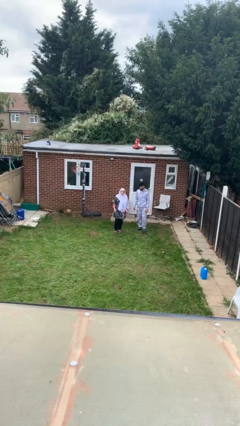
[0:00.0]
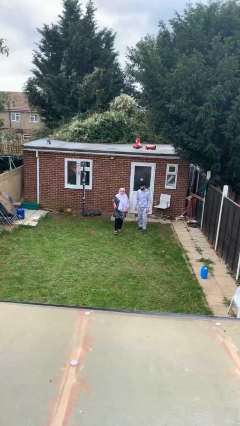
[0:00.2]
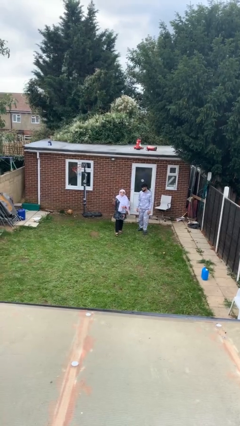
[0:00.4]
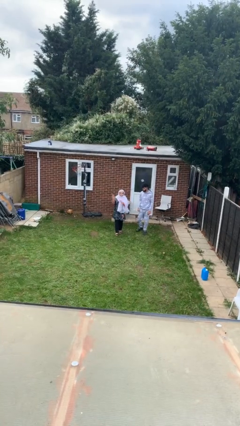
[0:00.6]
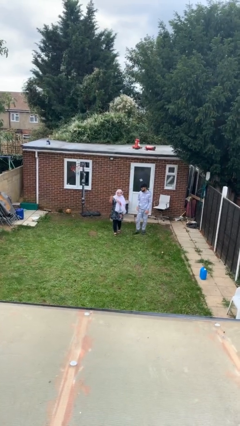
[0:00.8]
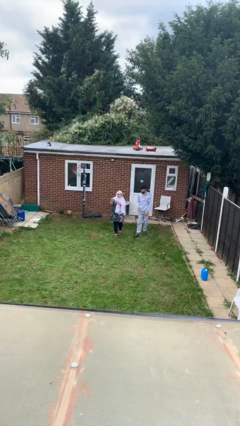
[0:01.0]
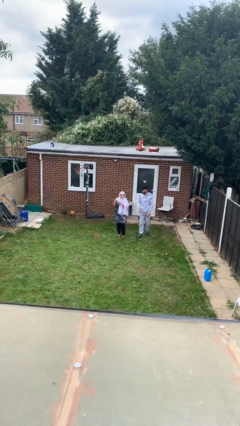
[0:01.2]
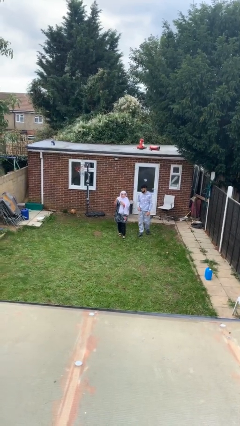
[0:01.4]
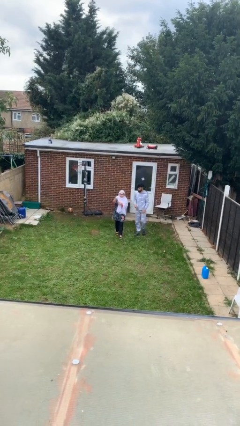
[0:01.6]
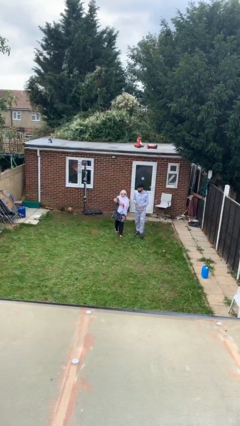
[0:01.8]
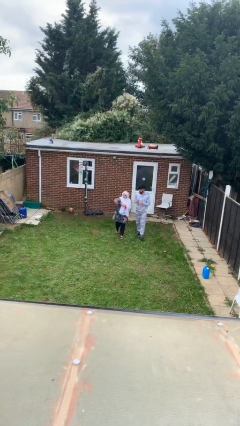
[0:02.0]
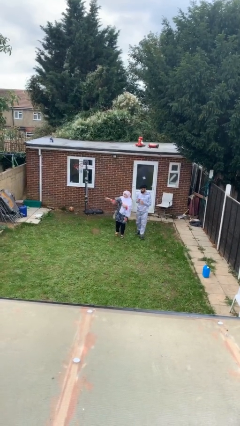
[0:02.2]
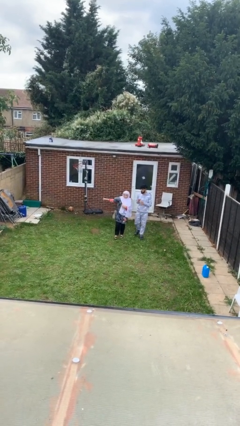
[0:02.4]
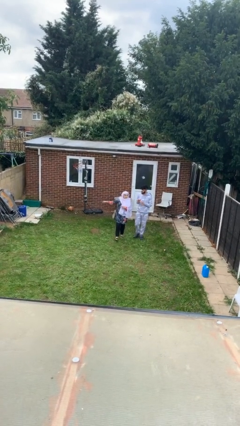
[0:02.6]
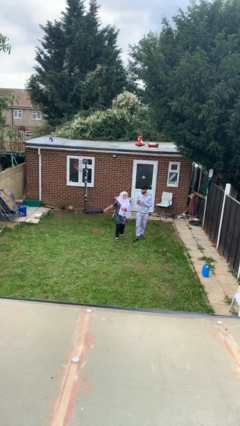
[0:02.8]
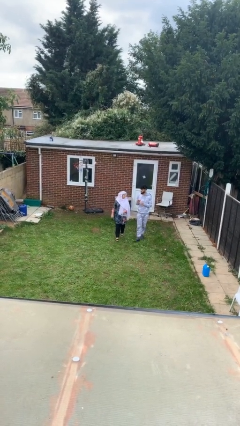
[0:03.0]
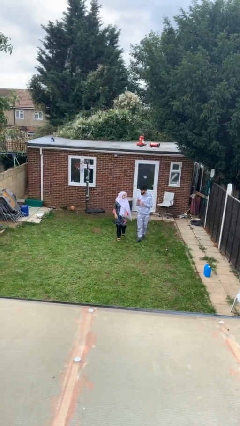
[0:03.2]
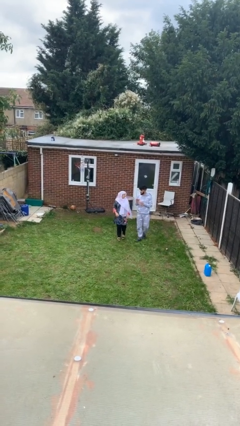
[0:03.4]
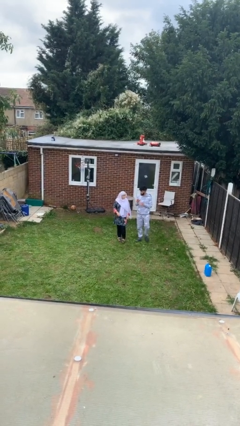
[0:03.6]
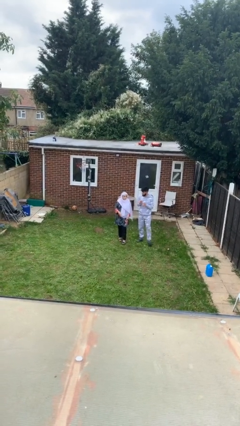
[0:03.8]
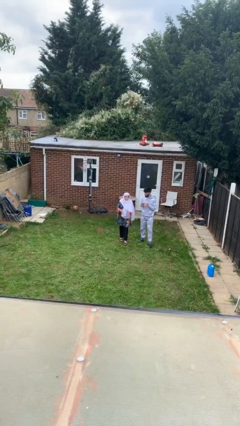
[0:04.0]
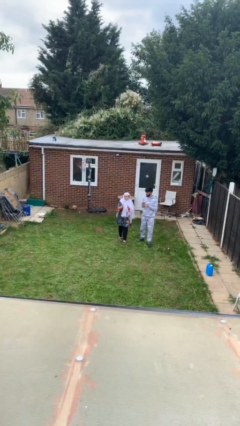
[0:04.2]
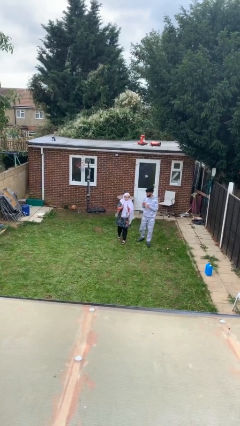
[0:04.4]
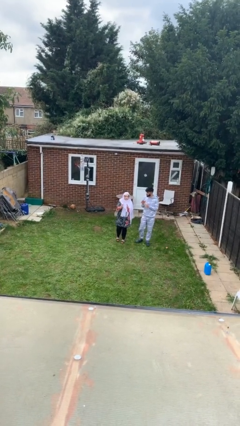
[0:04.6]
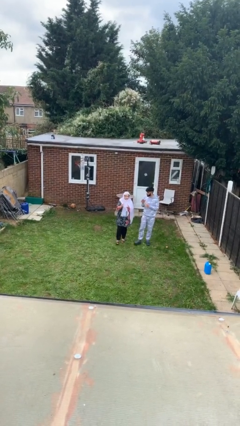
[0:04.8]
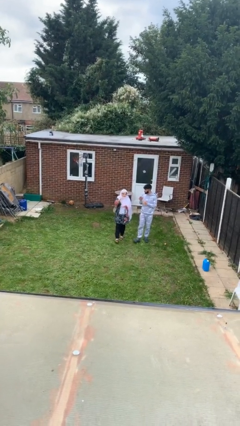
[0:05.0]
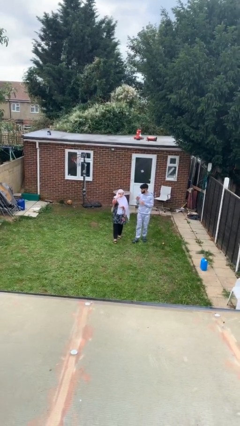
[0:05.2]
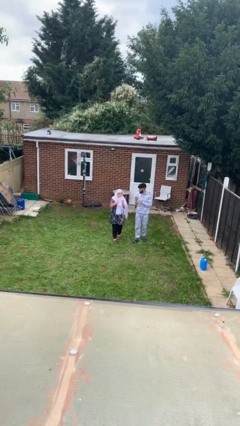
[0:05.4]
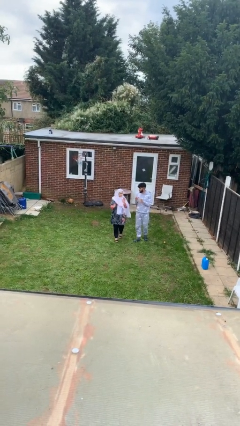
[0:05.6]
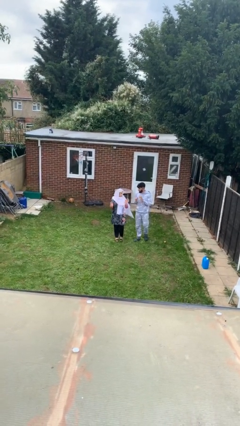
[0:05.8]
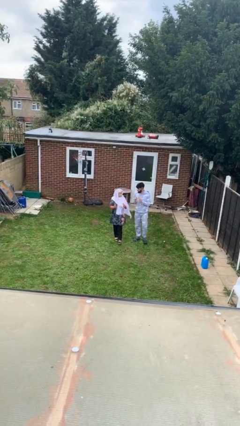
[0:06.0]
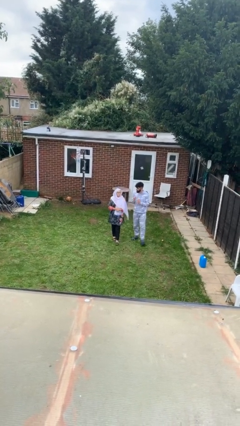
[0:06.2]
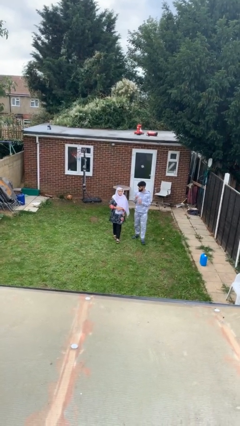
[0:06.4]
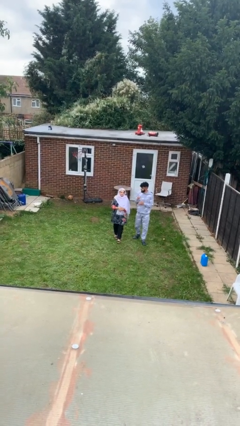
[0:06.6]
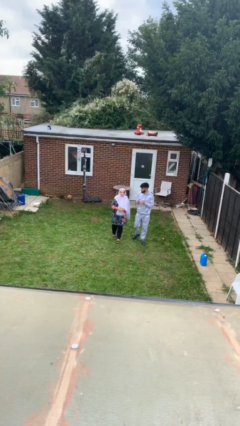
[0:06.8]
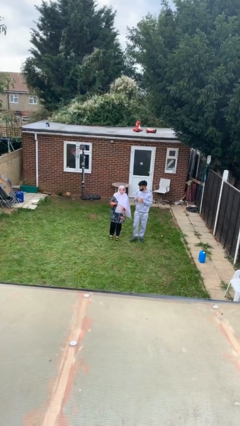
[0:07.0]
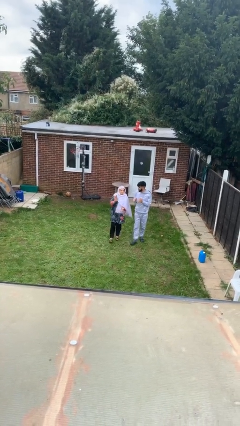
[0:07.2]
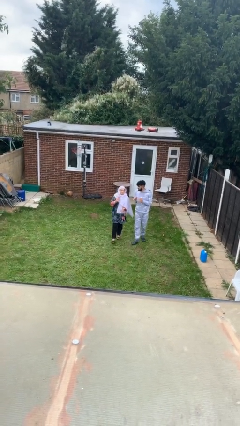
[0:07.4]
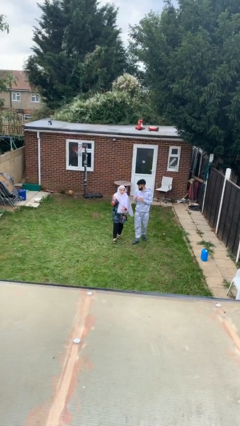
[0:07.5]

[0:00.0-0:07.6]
person talks to person

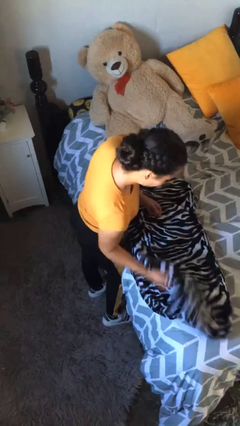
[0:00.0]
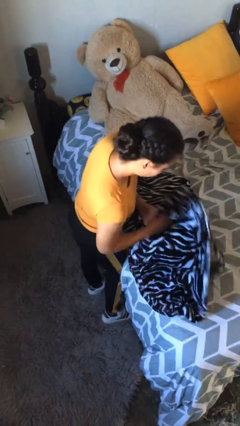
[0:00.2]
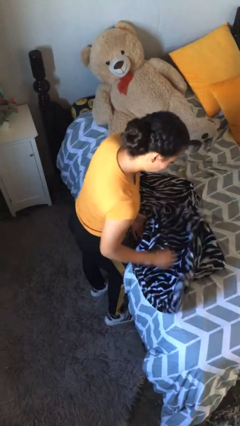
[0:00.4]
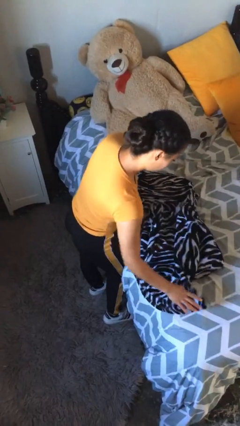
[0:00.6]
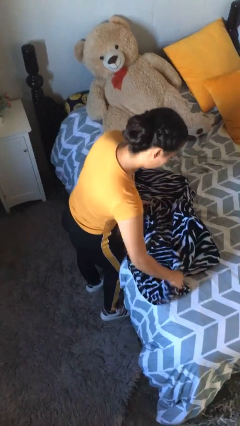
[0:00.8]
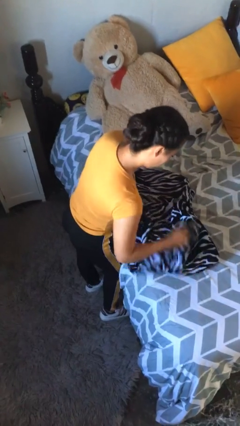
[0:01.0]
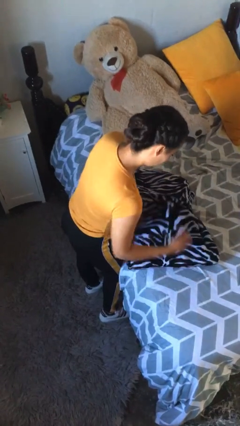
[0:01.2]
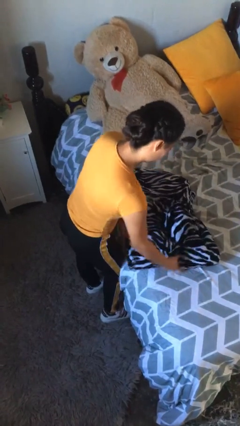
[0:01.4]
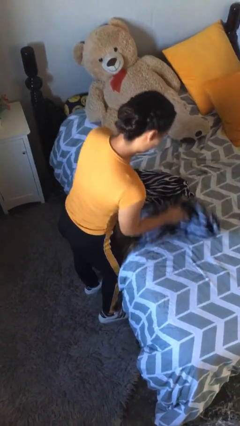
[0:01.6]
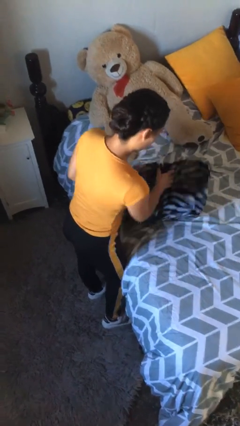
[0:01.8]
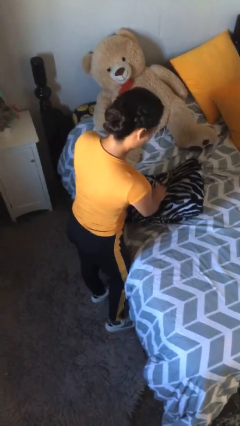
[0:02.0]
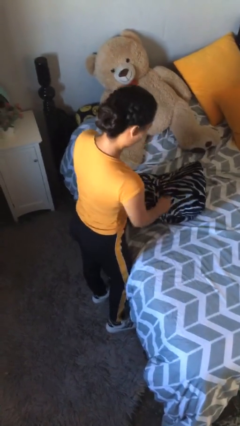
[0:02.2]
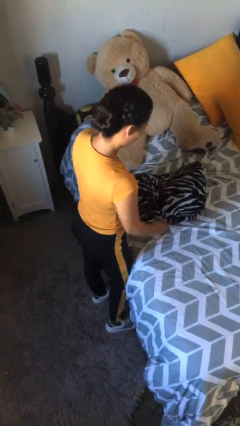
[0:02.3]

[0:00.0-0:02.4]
person folds blanket

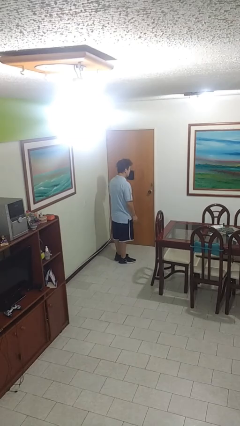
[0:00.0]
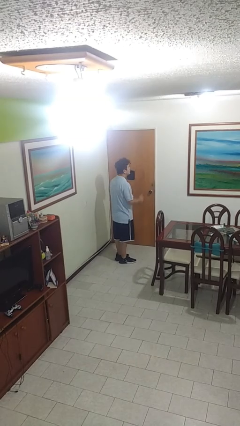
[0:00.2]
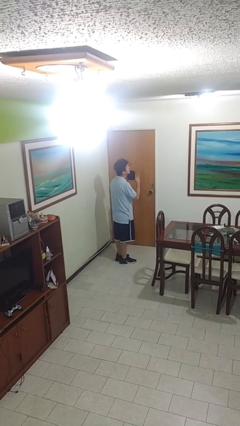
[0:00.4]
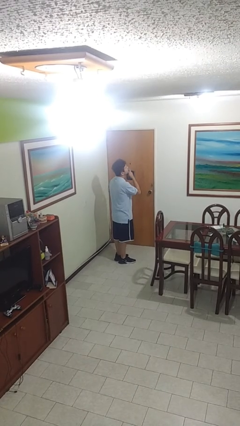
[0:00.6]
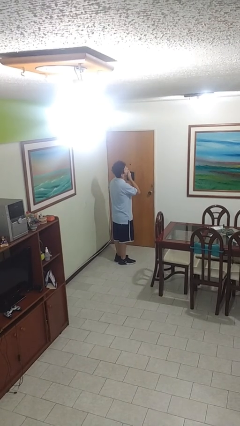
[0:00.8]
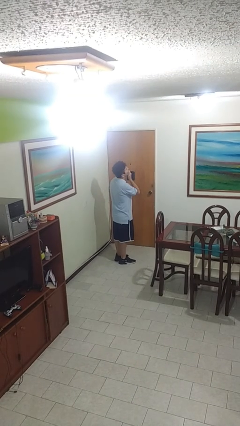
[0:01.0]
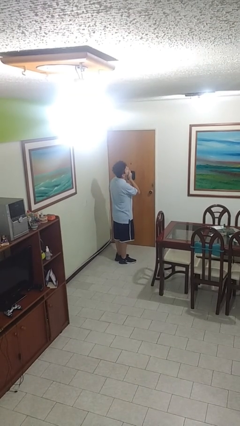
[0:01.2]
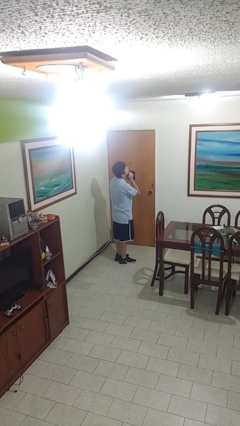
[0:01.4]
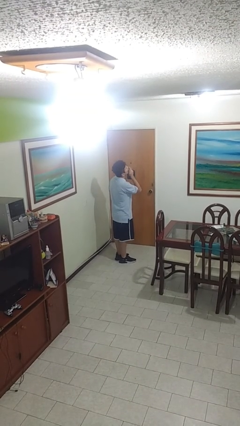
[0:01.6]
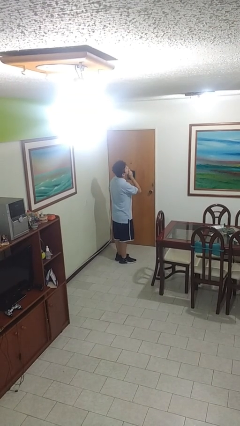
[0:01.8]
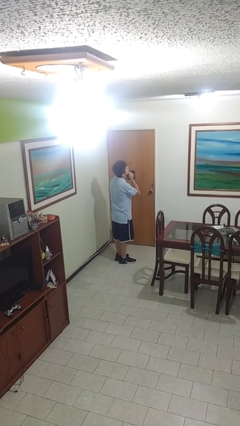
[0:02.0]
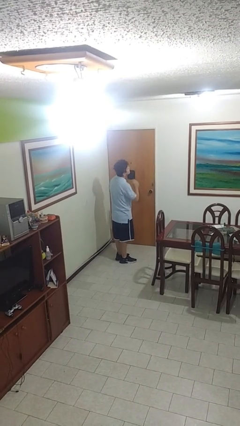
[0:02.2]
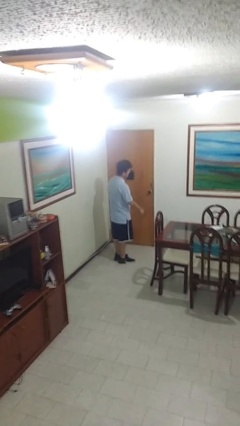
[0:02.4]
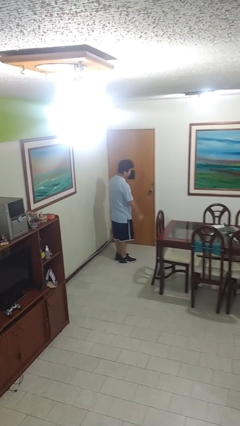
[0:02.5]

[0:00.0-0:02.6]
person strokes chin

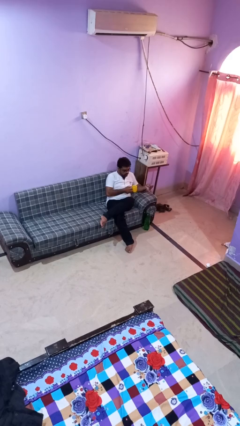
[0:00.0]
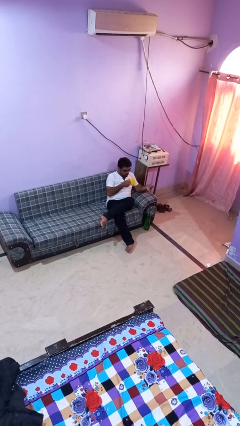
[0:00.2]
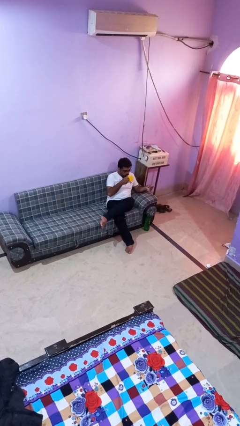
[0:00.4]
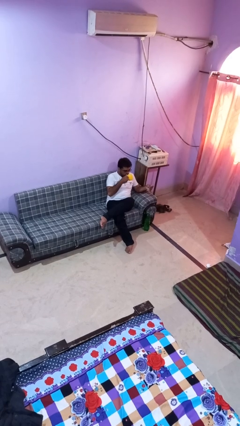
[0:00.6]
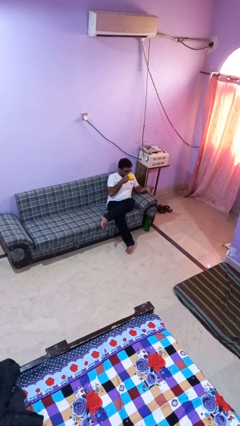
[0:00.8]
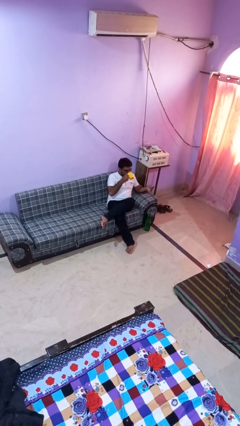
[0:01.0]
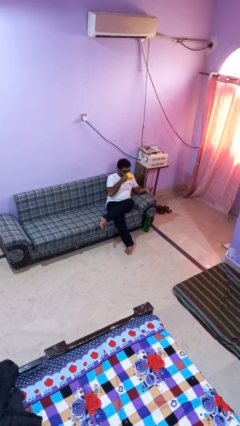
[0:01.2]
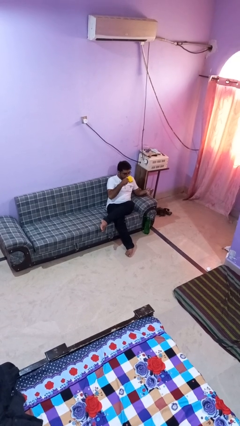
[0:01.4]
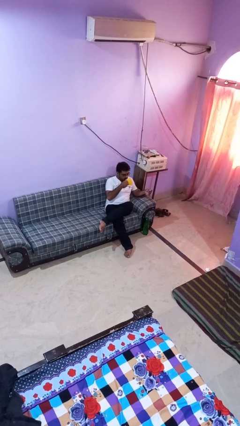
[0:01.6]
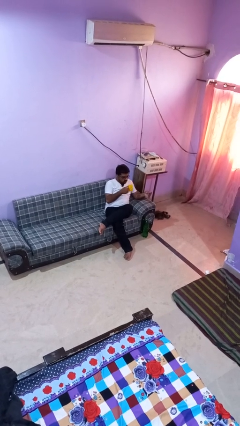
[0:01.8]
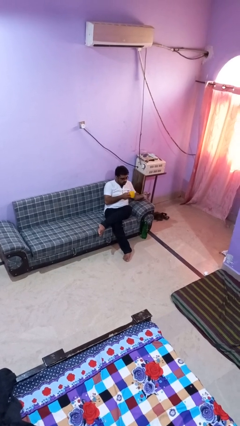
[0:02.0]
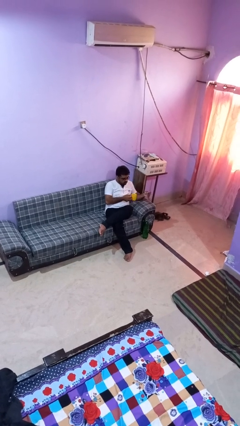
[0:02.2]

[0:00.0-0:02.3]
person drinks from mug

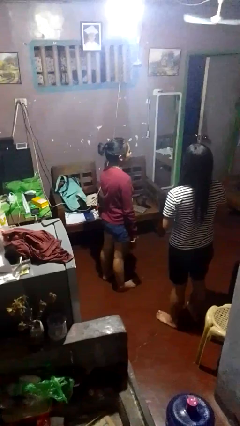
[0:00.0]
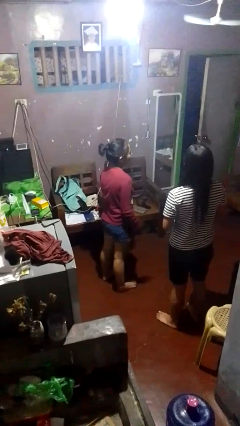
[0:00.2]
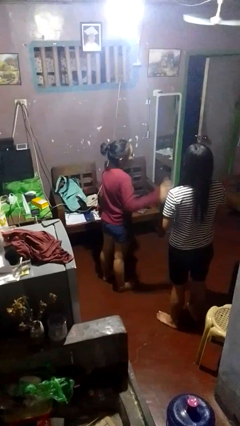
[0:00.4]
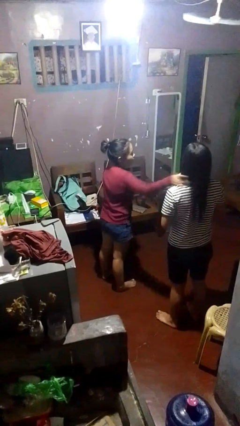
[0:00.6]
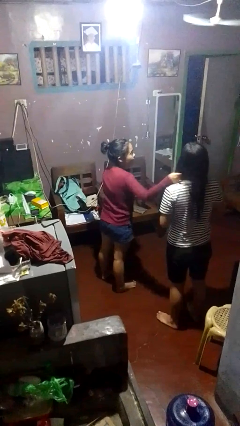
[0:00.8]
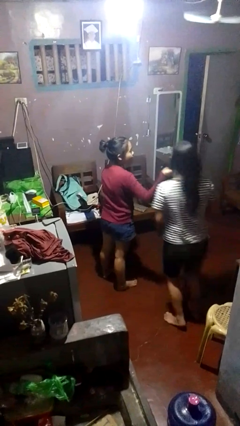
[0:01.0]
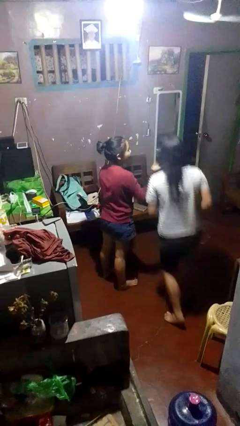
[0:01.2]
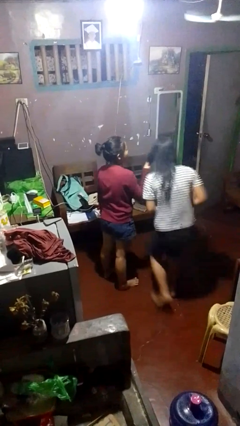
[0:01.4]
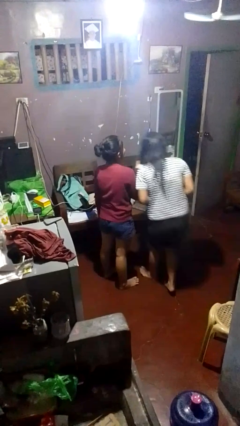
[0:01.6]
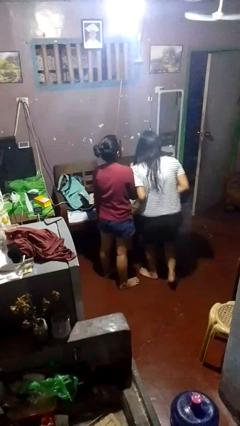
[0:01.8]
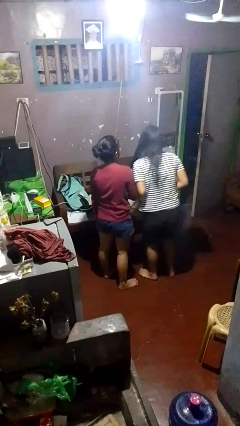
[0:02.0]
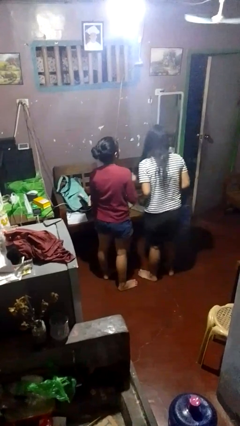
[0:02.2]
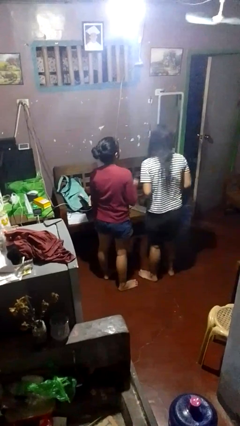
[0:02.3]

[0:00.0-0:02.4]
person grabs person by hair

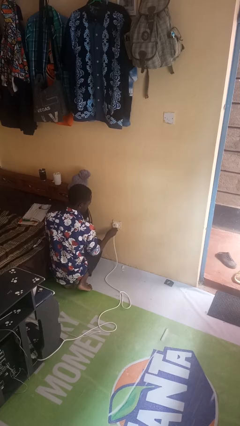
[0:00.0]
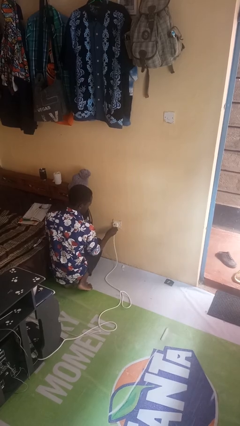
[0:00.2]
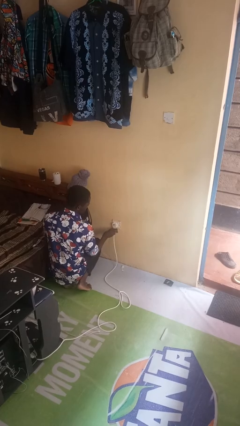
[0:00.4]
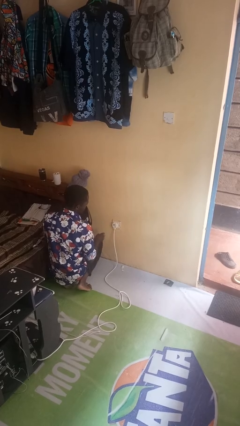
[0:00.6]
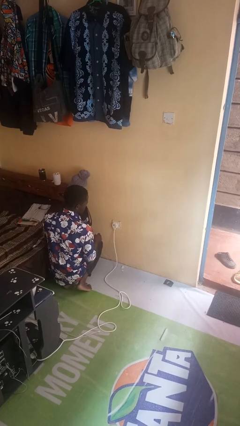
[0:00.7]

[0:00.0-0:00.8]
person plugs into electrical socket
